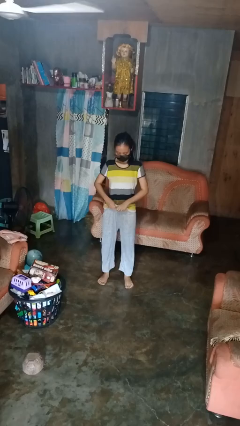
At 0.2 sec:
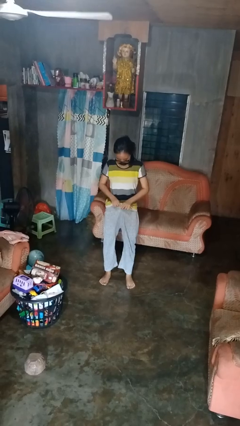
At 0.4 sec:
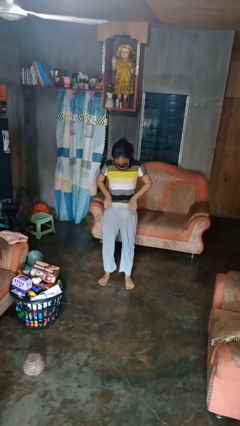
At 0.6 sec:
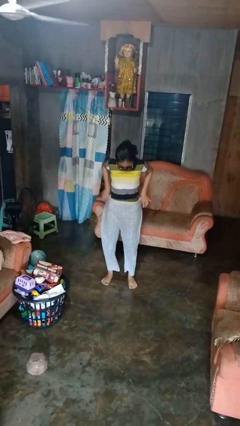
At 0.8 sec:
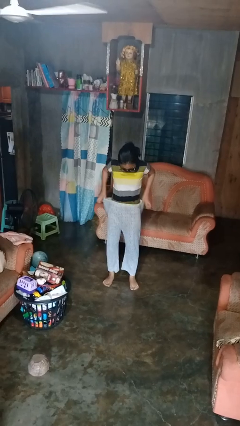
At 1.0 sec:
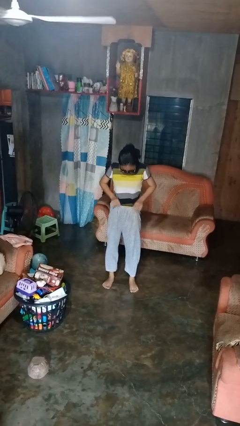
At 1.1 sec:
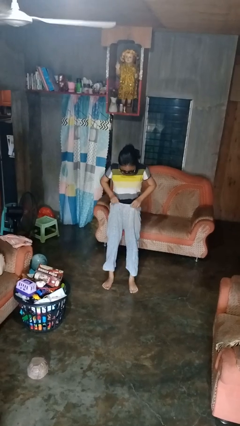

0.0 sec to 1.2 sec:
person tucks in shirt

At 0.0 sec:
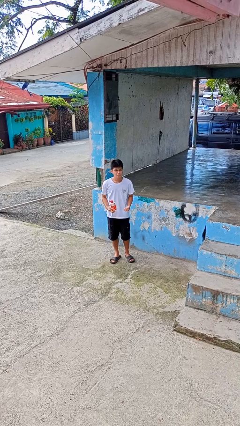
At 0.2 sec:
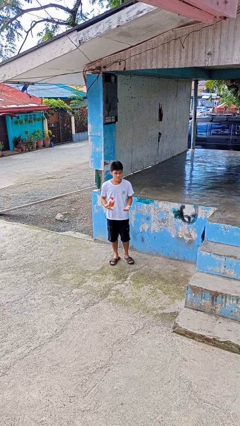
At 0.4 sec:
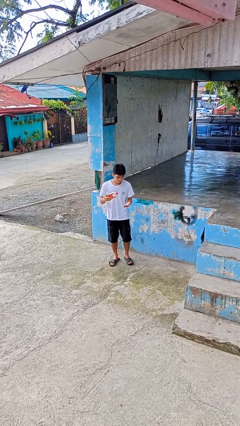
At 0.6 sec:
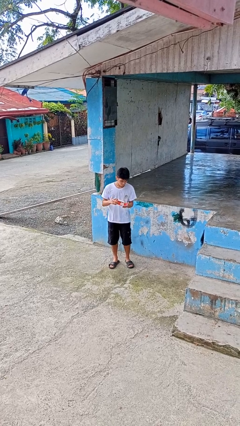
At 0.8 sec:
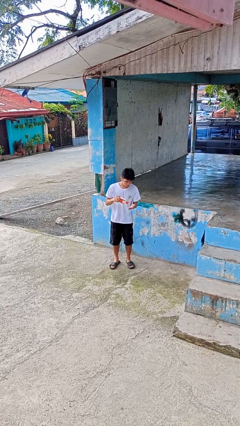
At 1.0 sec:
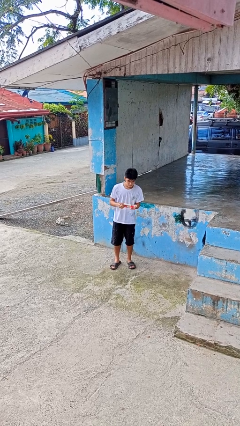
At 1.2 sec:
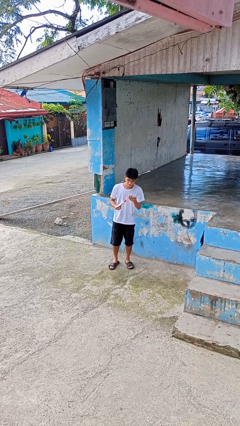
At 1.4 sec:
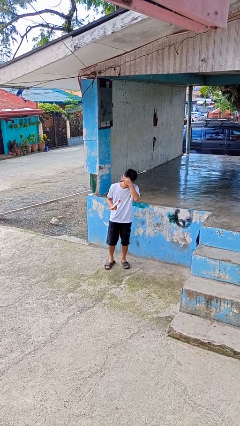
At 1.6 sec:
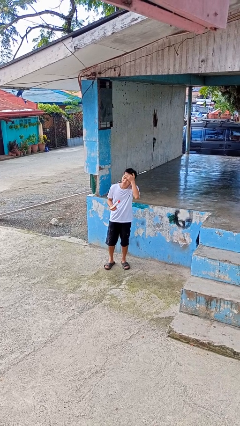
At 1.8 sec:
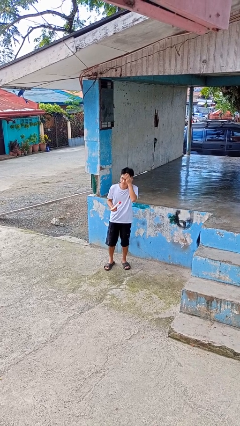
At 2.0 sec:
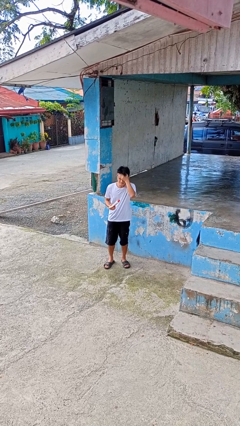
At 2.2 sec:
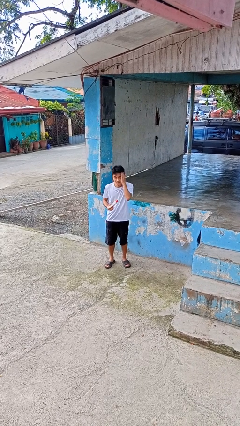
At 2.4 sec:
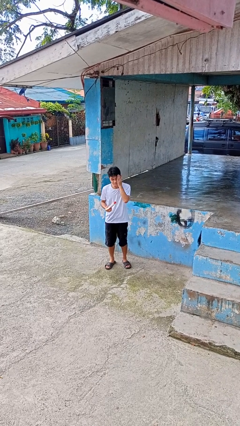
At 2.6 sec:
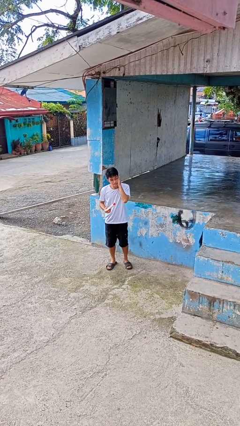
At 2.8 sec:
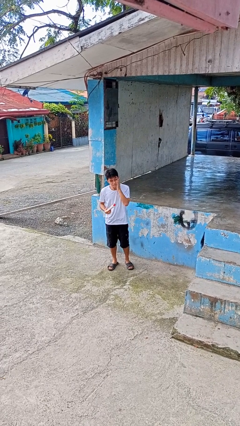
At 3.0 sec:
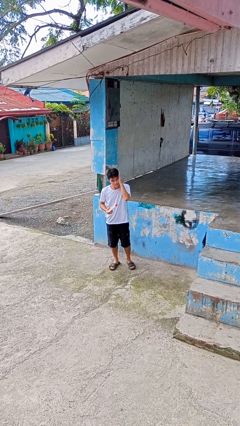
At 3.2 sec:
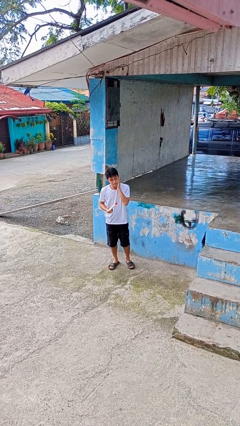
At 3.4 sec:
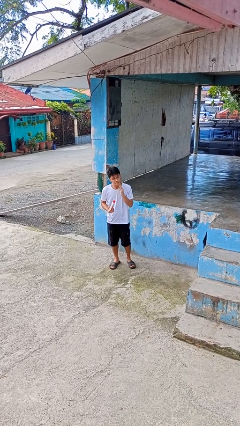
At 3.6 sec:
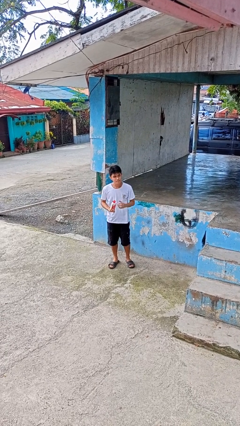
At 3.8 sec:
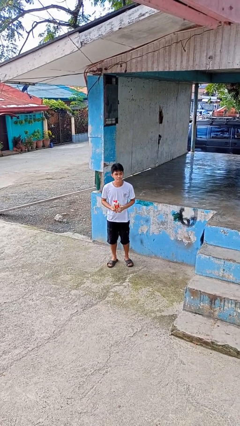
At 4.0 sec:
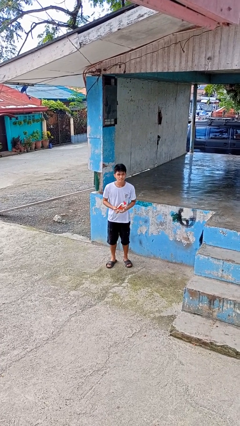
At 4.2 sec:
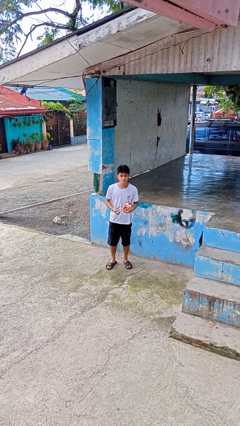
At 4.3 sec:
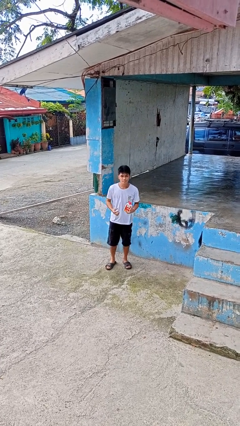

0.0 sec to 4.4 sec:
person applies facial moisturizer

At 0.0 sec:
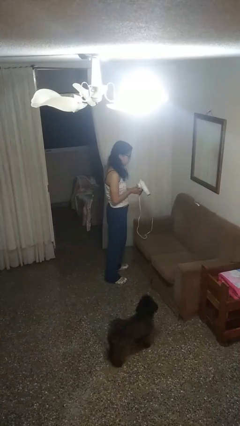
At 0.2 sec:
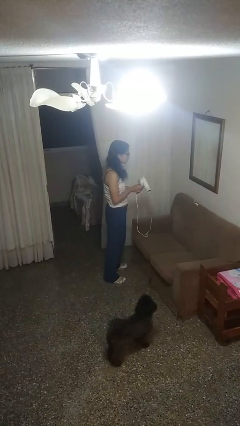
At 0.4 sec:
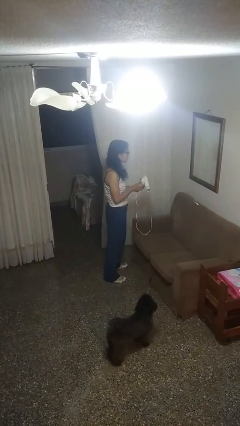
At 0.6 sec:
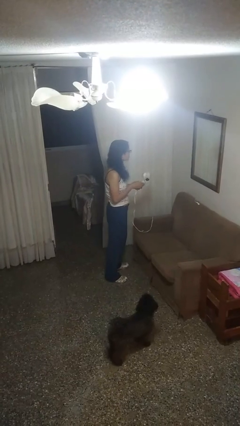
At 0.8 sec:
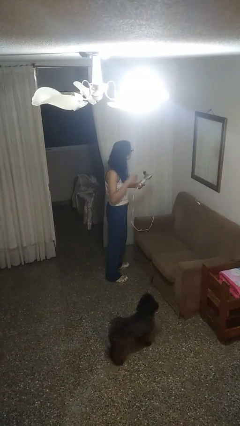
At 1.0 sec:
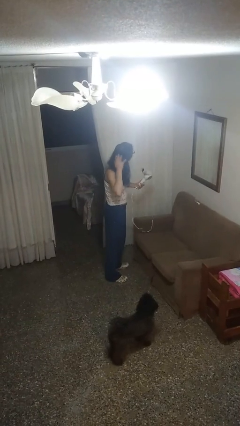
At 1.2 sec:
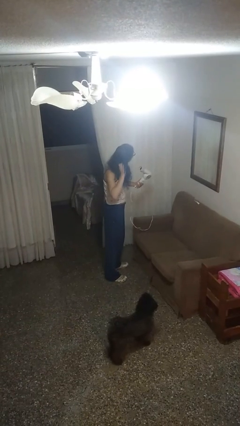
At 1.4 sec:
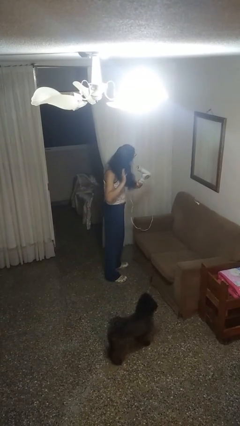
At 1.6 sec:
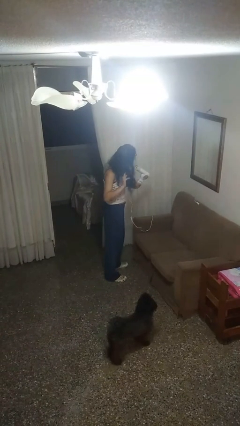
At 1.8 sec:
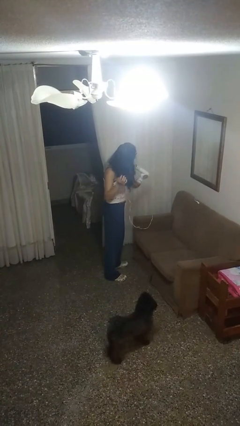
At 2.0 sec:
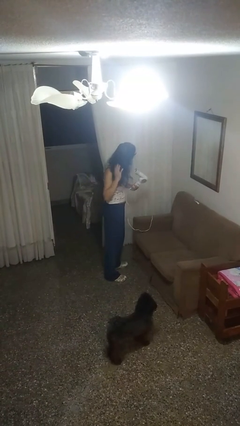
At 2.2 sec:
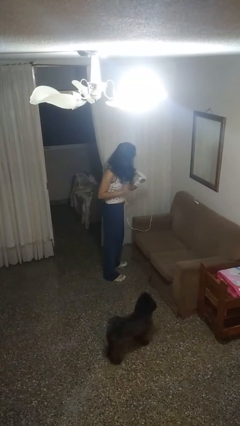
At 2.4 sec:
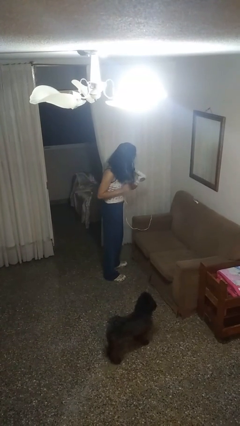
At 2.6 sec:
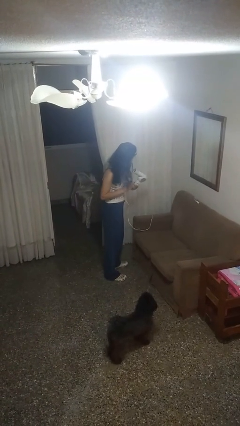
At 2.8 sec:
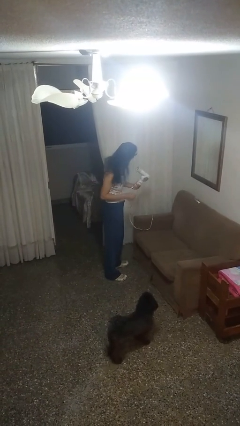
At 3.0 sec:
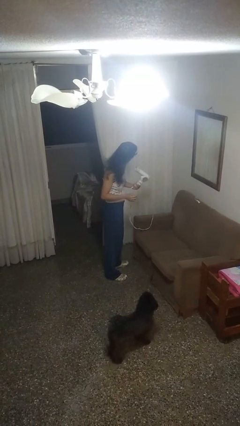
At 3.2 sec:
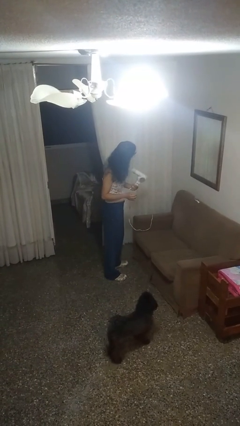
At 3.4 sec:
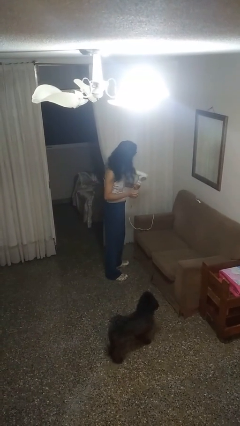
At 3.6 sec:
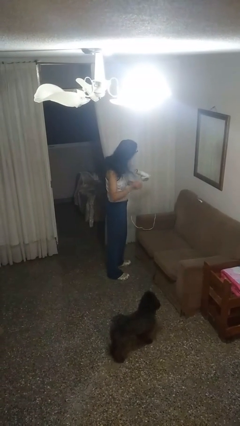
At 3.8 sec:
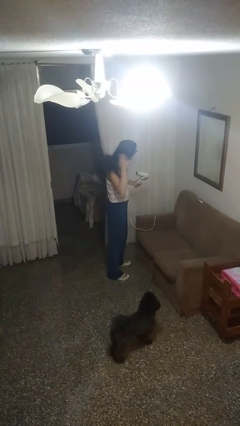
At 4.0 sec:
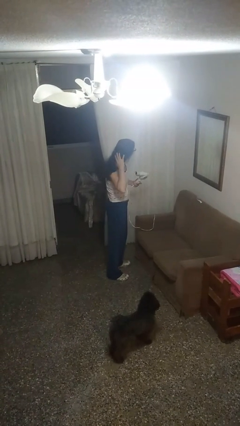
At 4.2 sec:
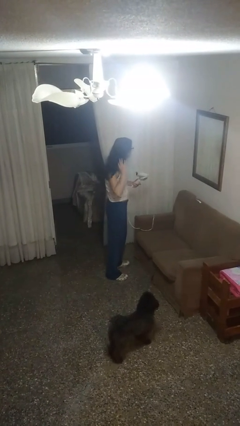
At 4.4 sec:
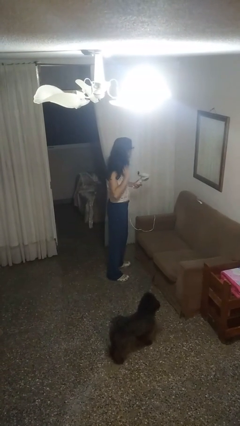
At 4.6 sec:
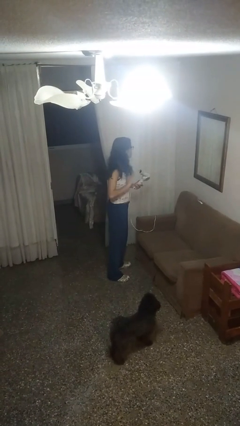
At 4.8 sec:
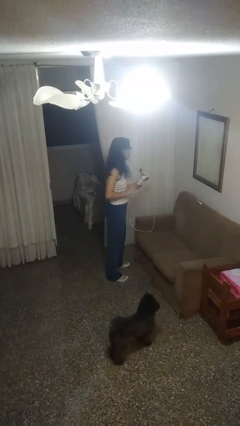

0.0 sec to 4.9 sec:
person dries hair with hairdryer

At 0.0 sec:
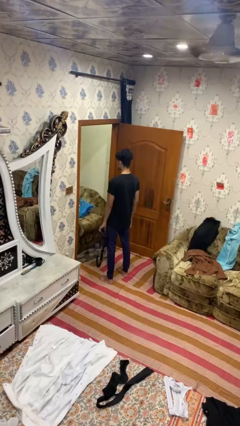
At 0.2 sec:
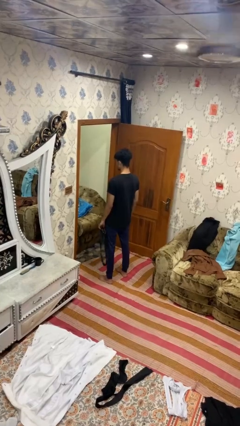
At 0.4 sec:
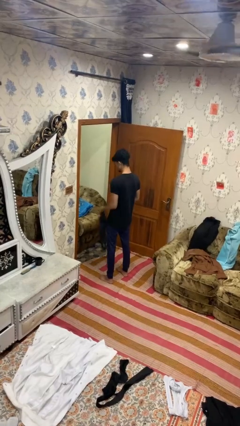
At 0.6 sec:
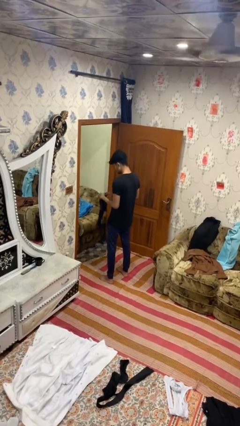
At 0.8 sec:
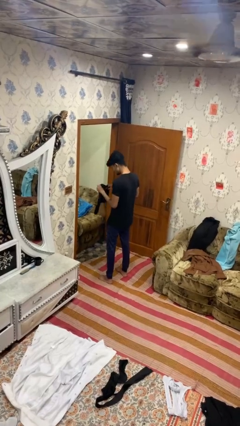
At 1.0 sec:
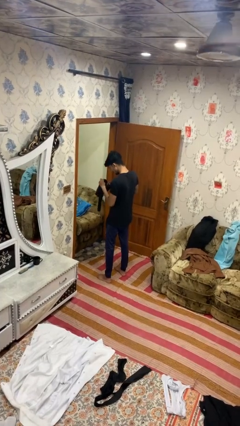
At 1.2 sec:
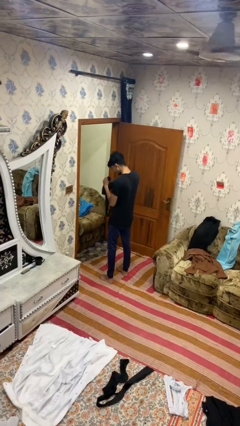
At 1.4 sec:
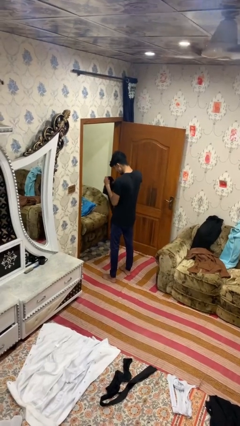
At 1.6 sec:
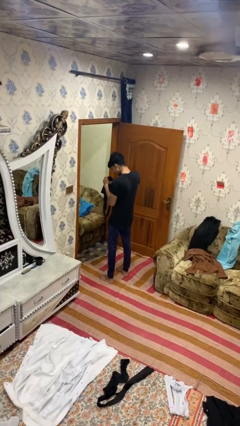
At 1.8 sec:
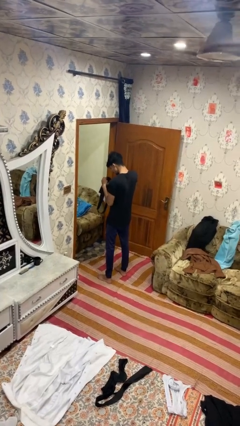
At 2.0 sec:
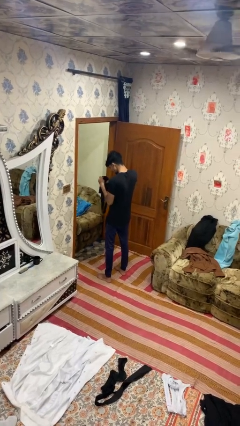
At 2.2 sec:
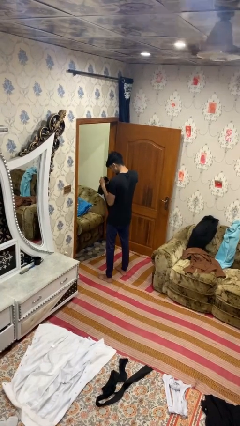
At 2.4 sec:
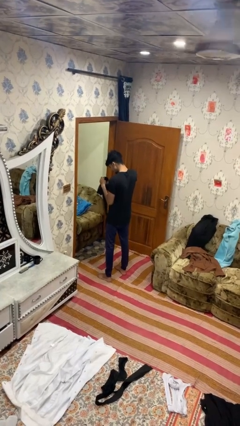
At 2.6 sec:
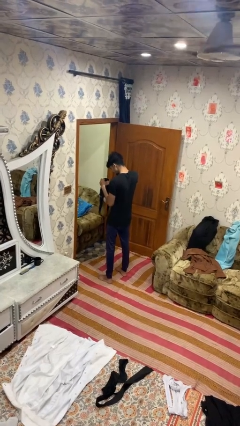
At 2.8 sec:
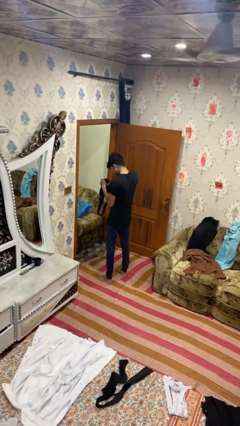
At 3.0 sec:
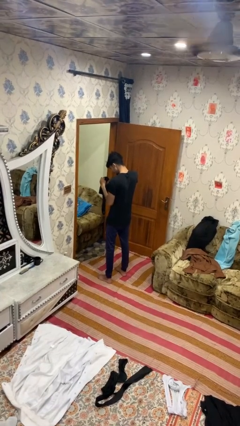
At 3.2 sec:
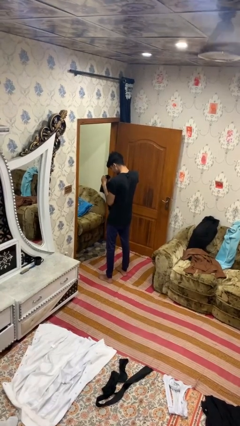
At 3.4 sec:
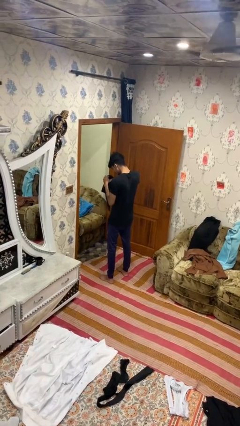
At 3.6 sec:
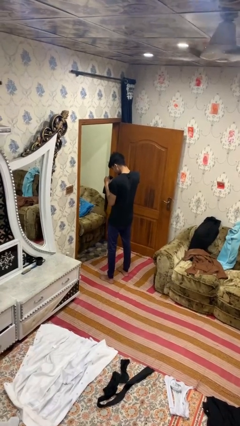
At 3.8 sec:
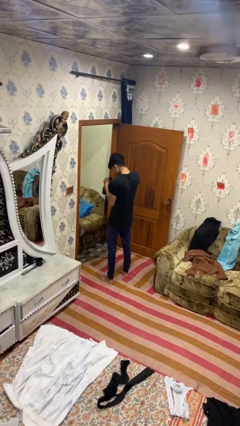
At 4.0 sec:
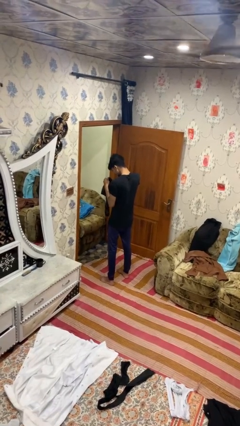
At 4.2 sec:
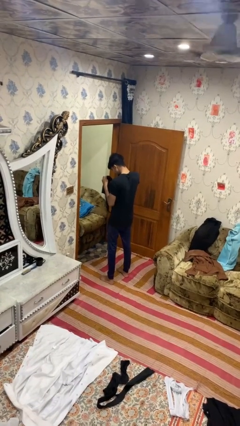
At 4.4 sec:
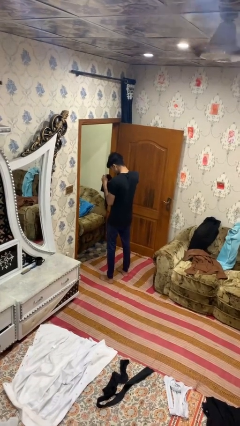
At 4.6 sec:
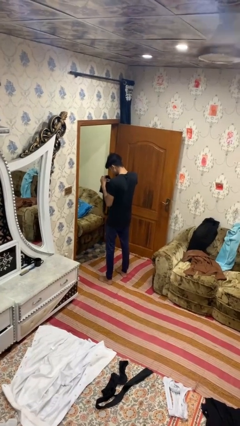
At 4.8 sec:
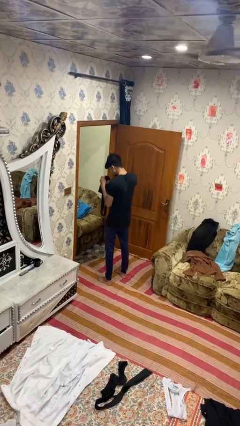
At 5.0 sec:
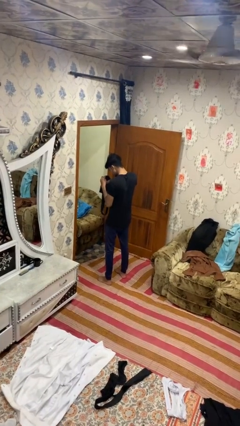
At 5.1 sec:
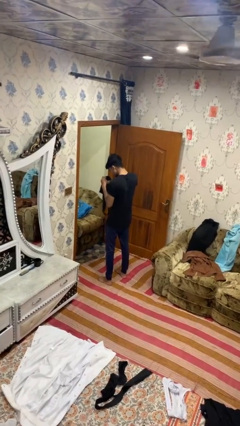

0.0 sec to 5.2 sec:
person searches in bag

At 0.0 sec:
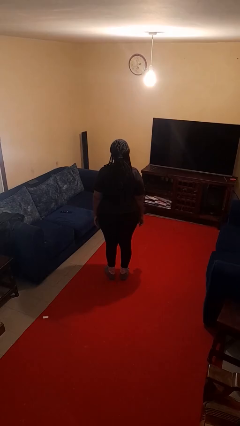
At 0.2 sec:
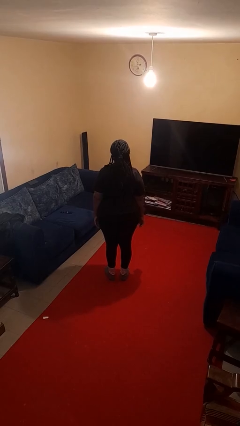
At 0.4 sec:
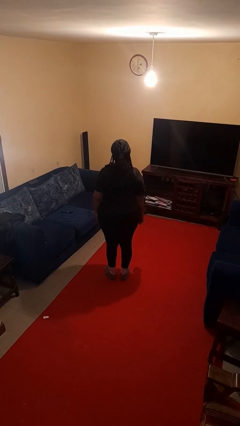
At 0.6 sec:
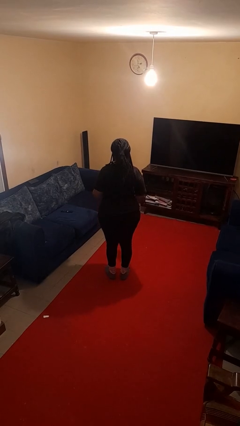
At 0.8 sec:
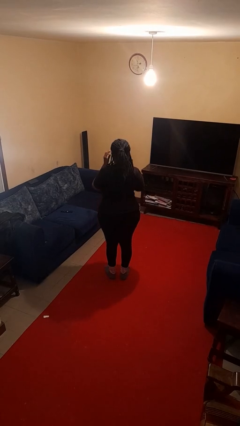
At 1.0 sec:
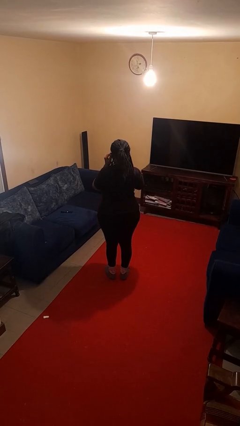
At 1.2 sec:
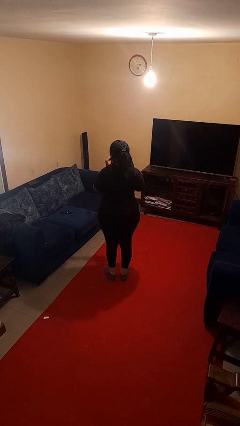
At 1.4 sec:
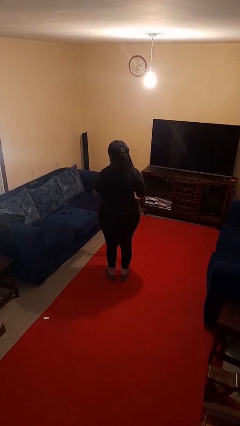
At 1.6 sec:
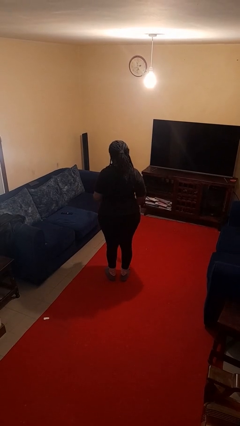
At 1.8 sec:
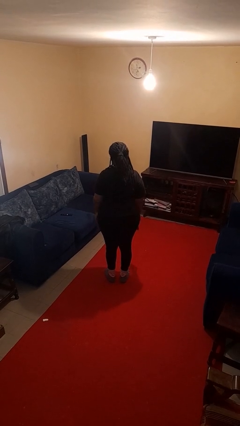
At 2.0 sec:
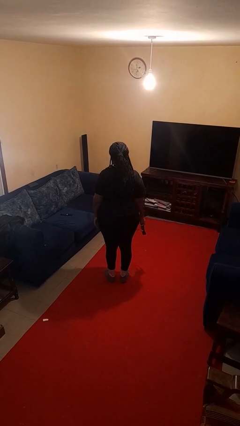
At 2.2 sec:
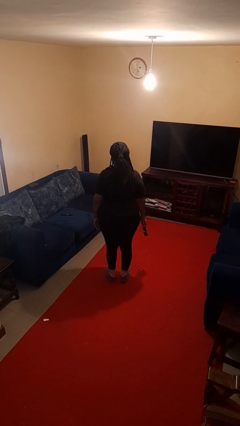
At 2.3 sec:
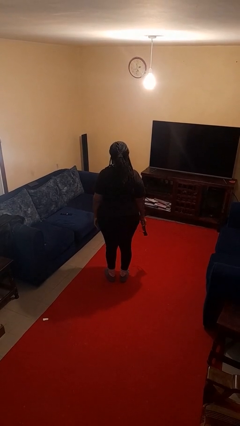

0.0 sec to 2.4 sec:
person takes off sunglasses
